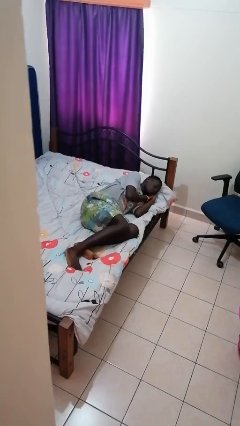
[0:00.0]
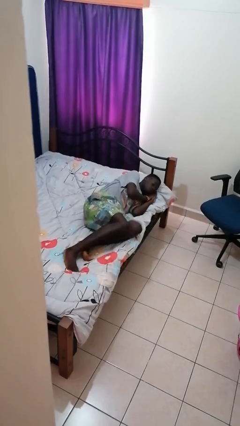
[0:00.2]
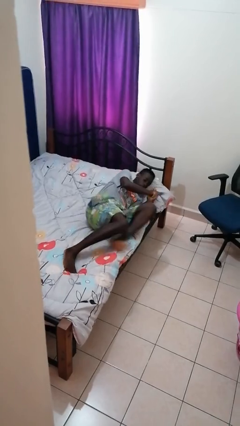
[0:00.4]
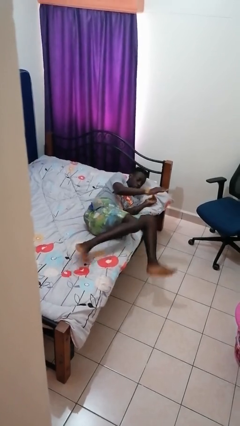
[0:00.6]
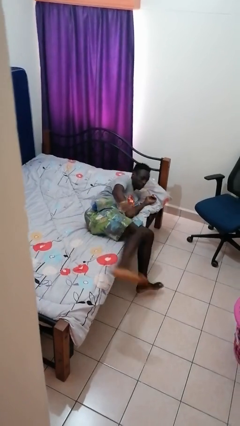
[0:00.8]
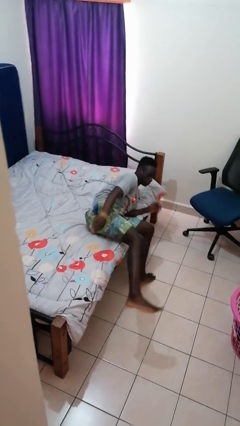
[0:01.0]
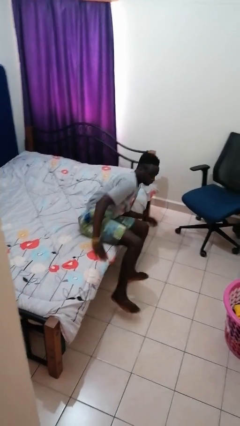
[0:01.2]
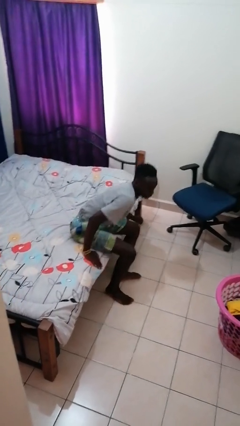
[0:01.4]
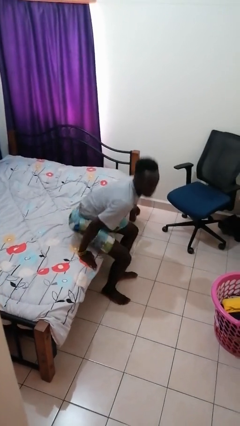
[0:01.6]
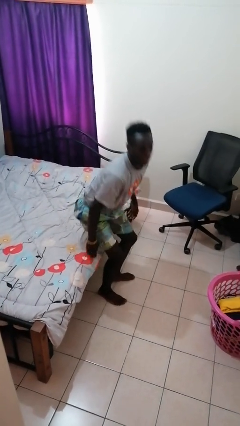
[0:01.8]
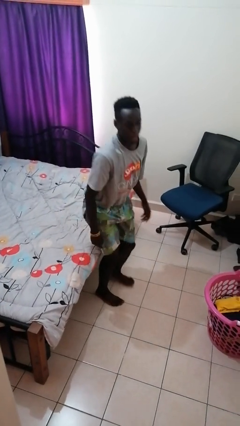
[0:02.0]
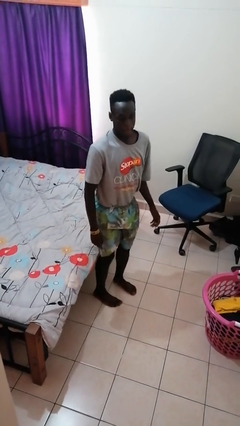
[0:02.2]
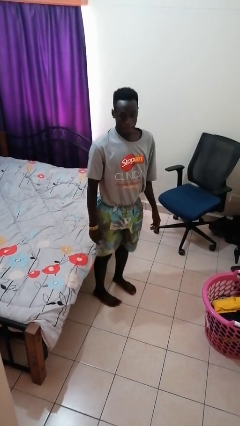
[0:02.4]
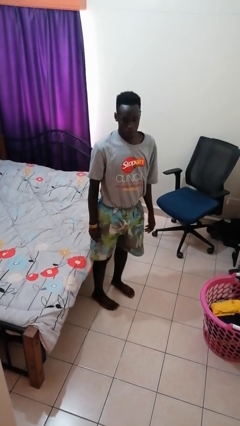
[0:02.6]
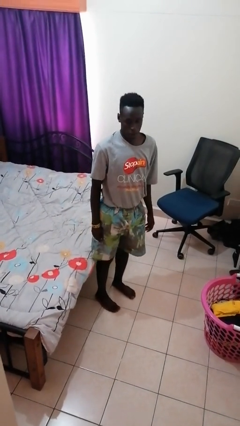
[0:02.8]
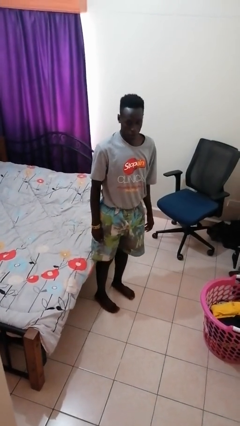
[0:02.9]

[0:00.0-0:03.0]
person stands up

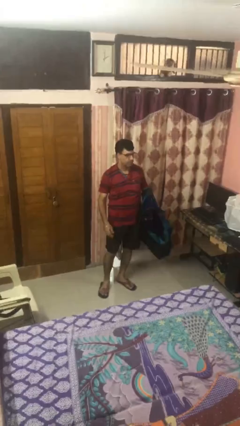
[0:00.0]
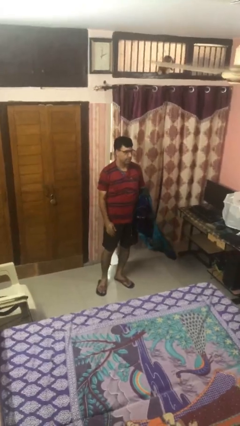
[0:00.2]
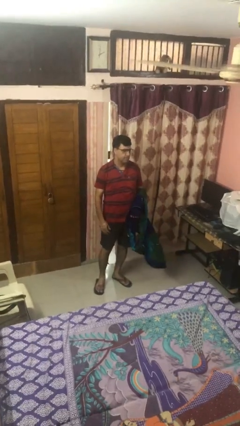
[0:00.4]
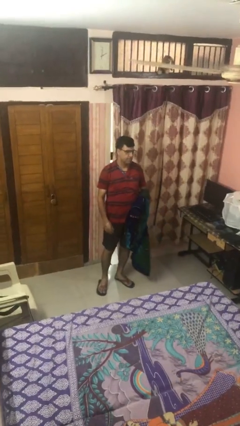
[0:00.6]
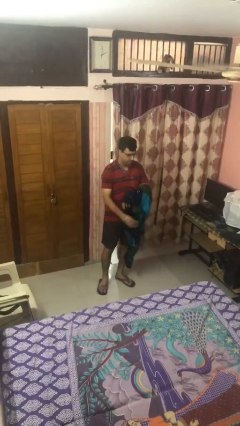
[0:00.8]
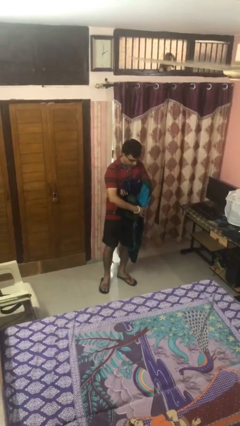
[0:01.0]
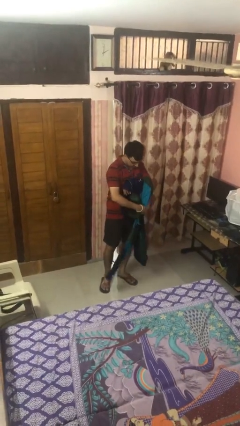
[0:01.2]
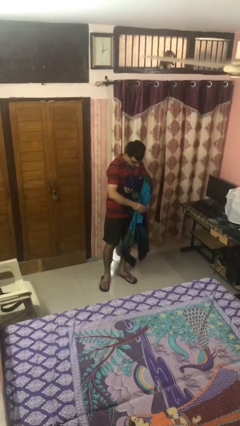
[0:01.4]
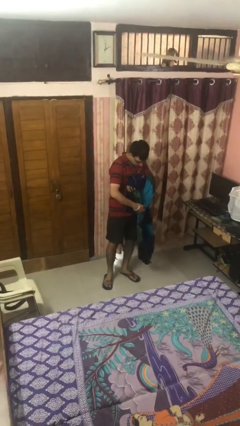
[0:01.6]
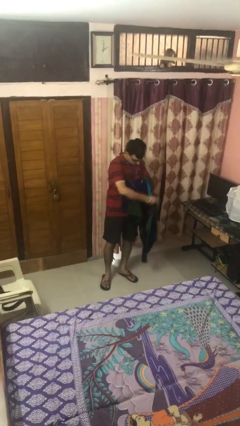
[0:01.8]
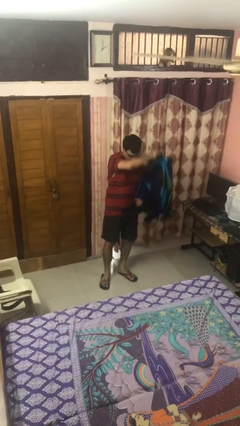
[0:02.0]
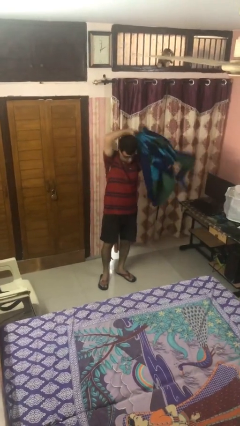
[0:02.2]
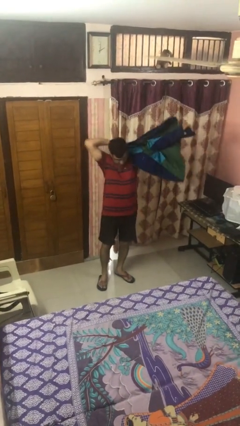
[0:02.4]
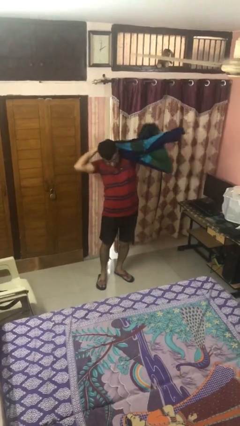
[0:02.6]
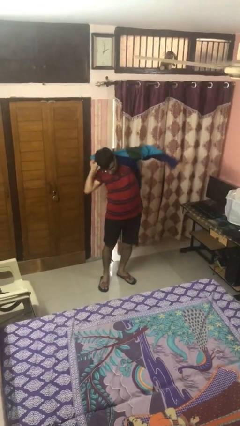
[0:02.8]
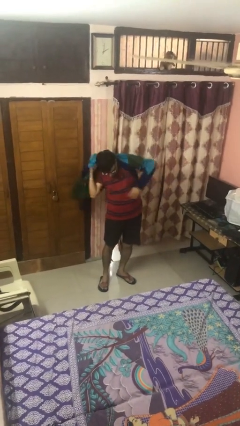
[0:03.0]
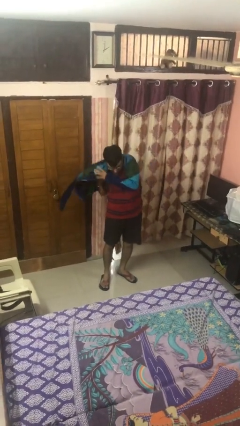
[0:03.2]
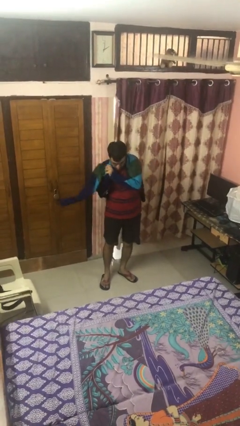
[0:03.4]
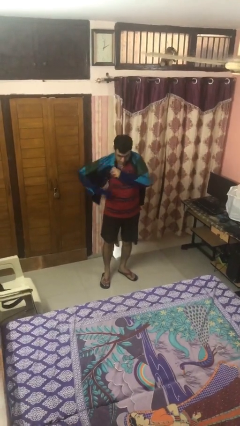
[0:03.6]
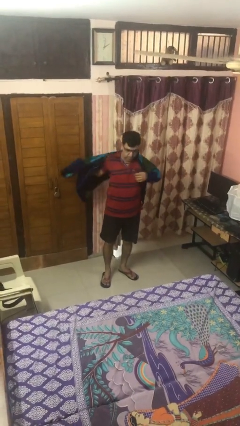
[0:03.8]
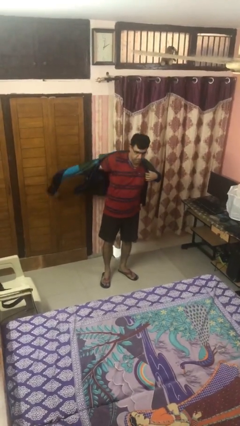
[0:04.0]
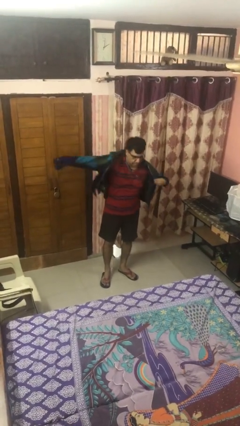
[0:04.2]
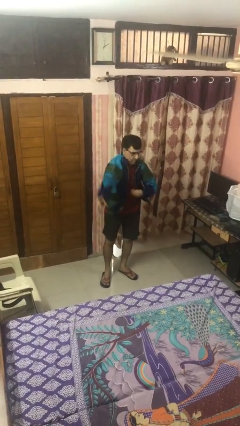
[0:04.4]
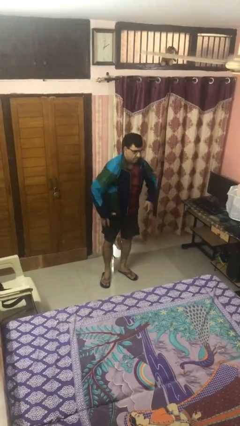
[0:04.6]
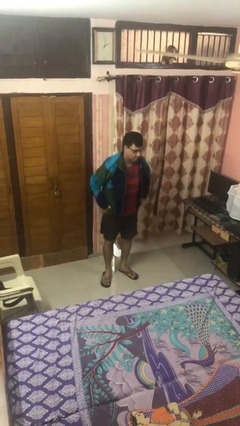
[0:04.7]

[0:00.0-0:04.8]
person puts on jacket

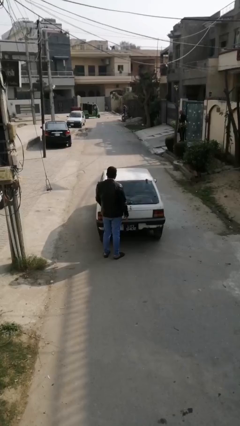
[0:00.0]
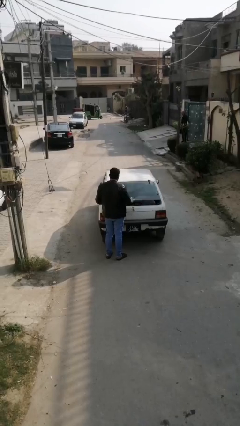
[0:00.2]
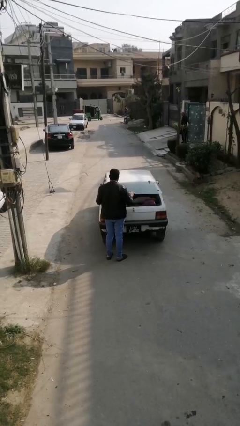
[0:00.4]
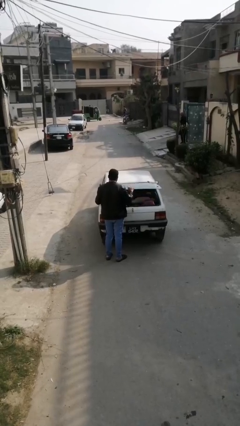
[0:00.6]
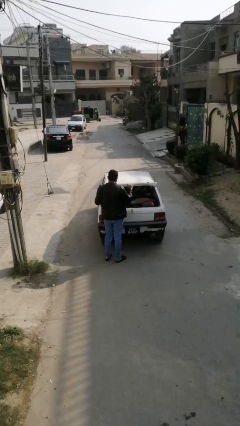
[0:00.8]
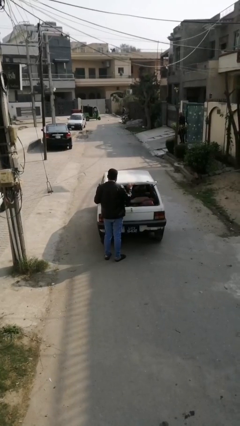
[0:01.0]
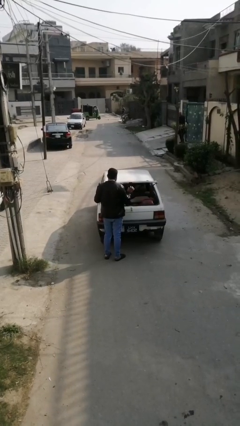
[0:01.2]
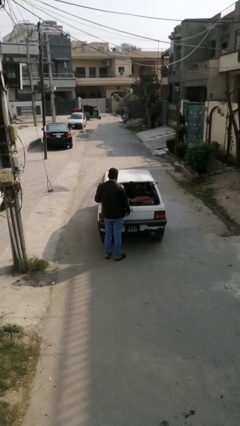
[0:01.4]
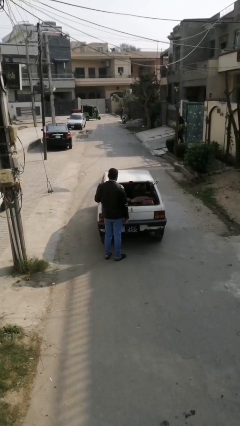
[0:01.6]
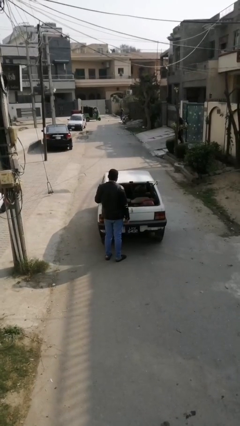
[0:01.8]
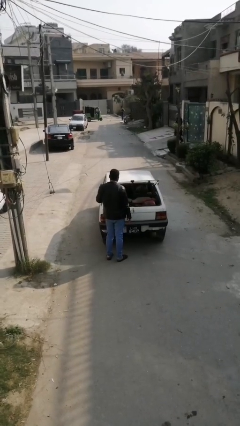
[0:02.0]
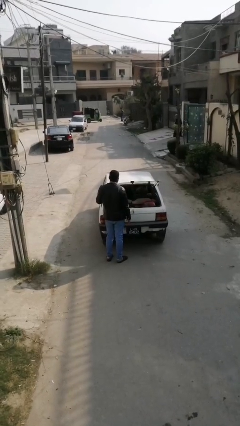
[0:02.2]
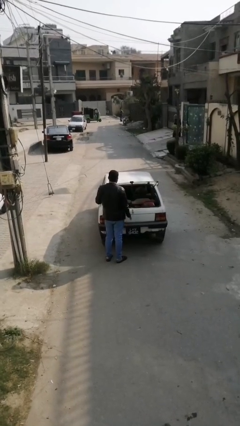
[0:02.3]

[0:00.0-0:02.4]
person opens car trunk

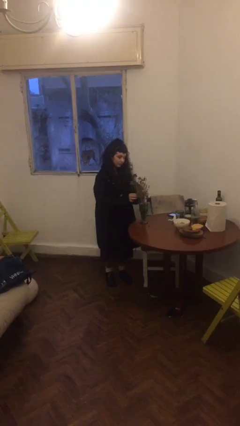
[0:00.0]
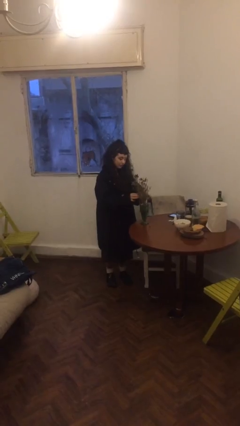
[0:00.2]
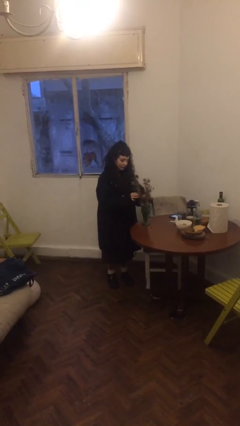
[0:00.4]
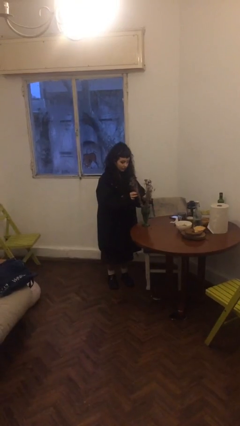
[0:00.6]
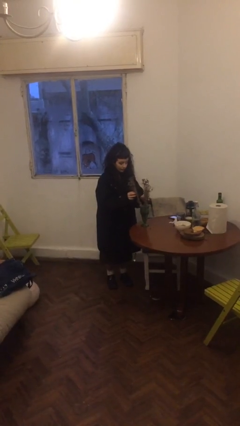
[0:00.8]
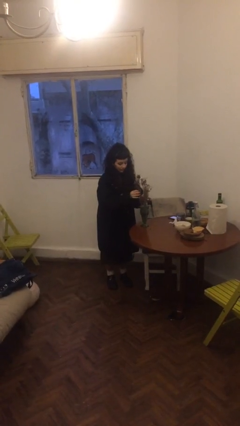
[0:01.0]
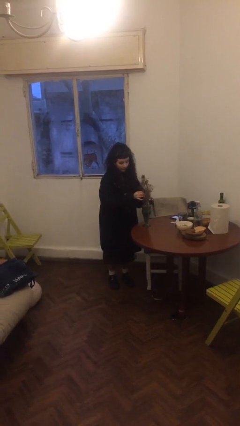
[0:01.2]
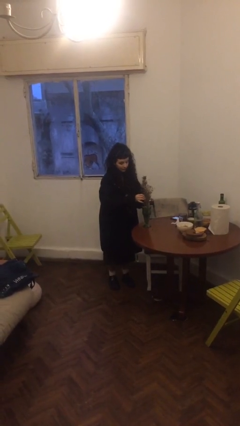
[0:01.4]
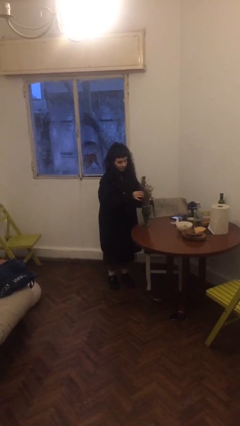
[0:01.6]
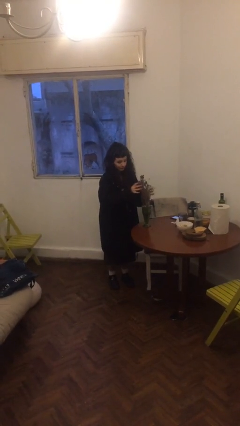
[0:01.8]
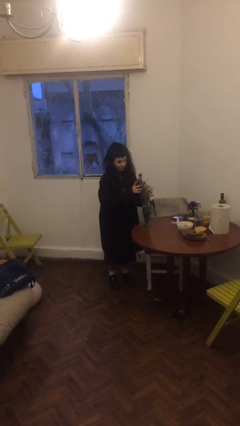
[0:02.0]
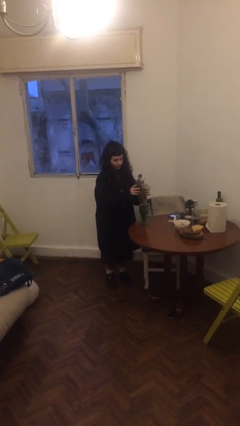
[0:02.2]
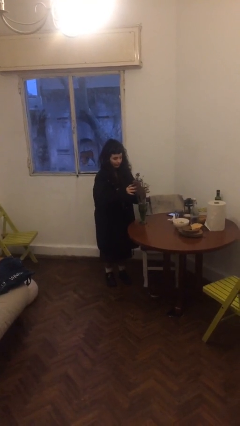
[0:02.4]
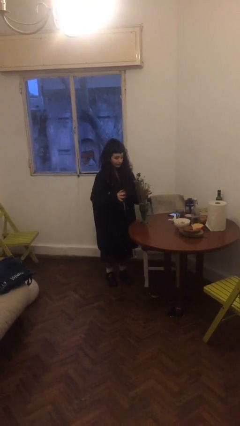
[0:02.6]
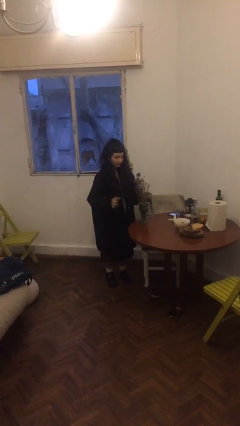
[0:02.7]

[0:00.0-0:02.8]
person arranges flowers in vase

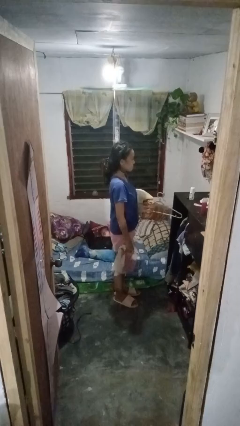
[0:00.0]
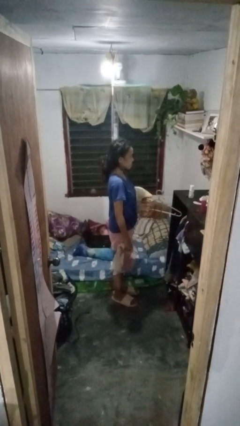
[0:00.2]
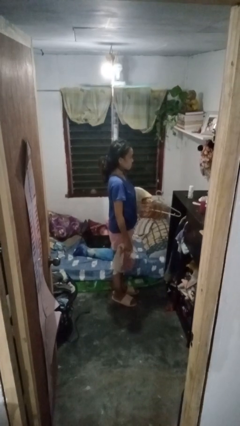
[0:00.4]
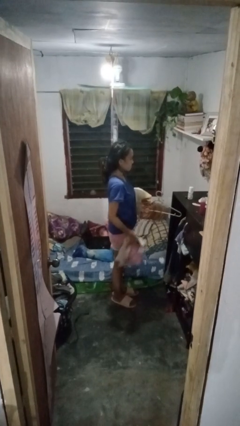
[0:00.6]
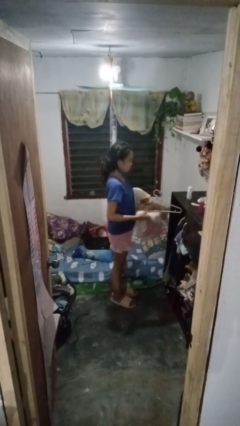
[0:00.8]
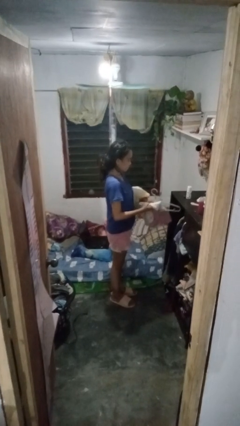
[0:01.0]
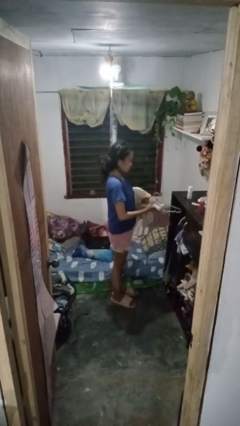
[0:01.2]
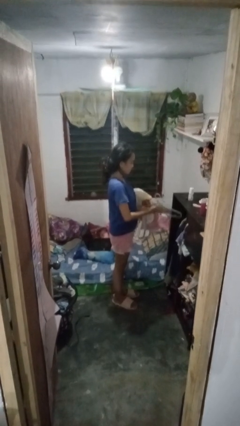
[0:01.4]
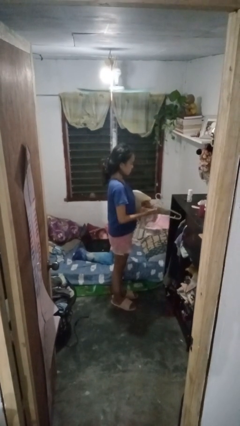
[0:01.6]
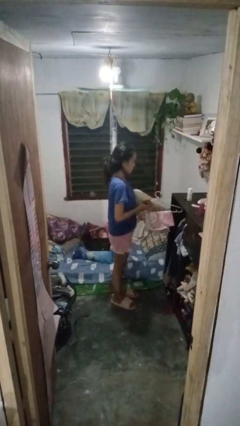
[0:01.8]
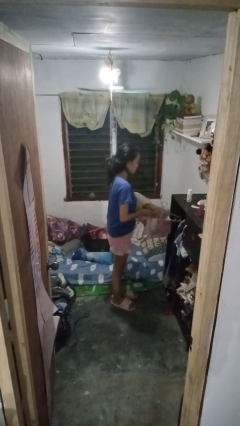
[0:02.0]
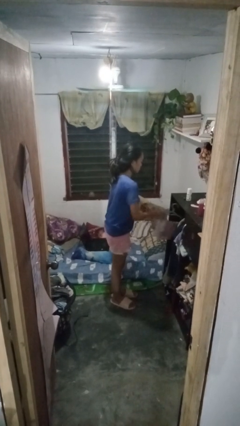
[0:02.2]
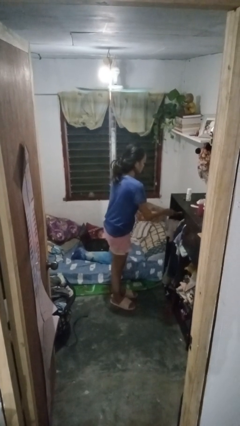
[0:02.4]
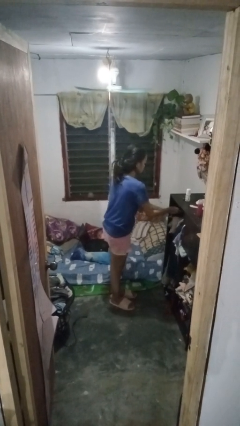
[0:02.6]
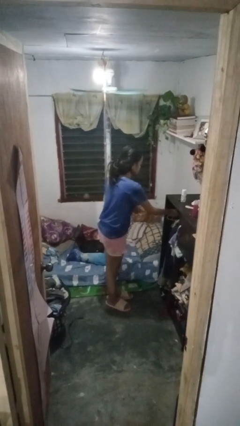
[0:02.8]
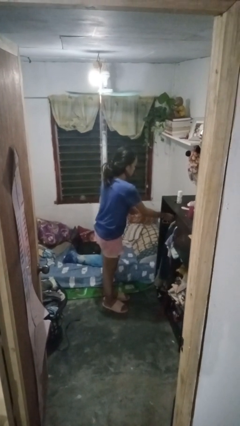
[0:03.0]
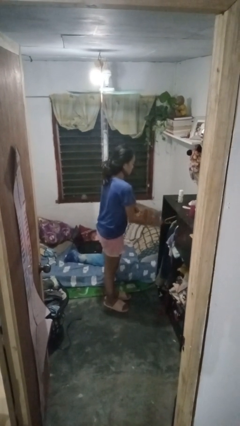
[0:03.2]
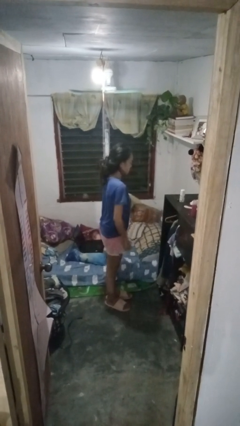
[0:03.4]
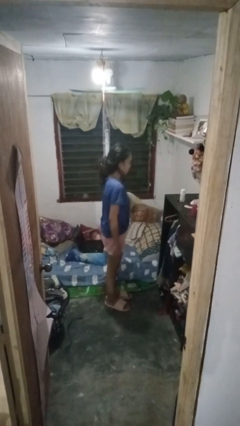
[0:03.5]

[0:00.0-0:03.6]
person puts clothes into closet

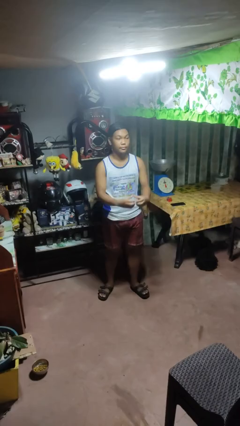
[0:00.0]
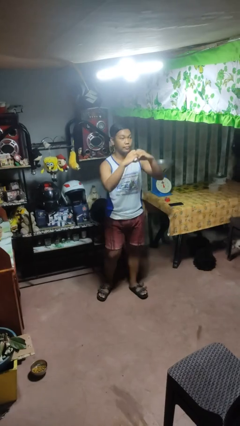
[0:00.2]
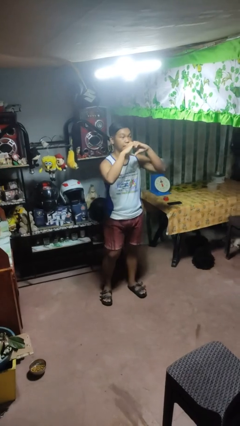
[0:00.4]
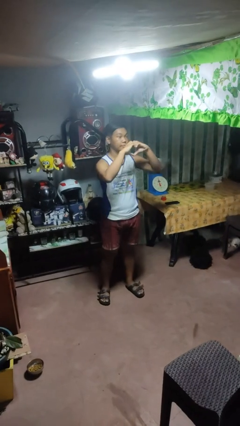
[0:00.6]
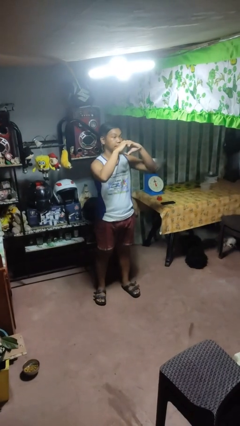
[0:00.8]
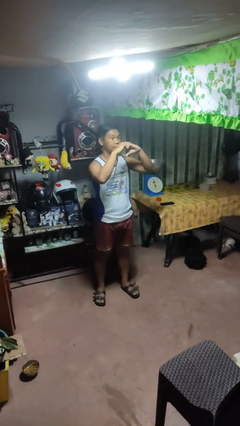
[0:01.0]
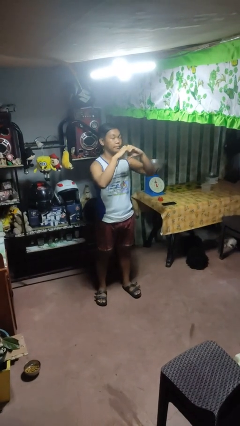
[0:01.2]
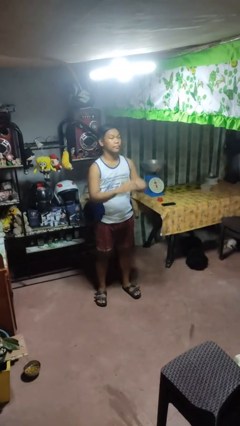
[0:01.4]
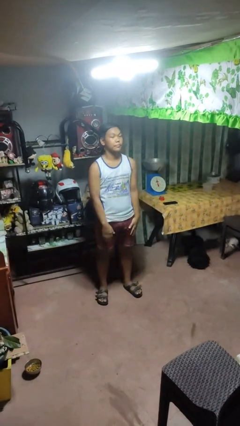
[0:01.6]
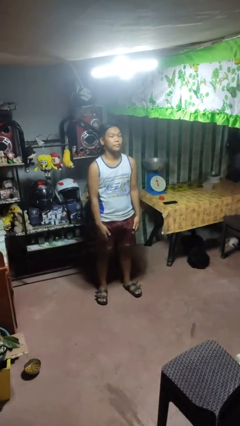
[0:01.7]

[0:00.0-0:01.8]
person gestures heart
